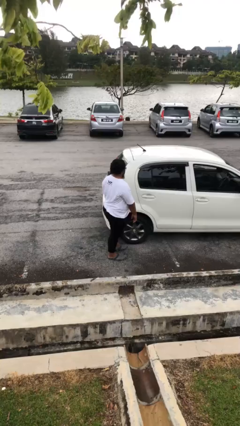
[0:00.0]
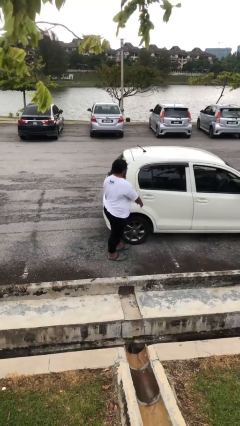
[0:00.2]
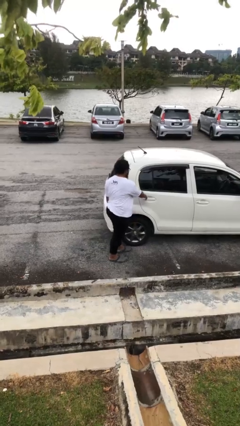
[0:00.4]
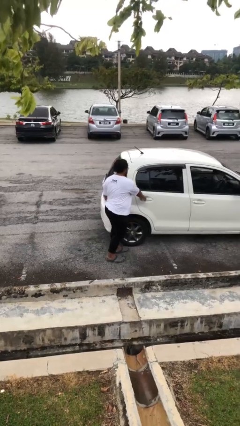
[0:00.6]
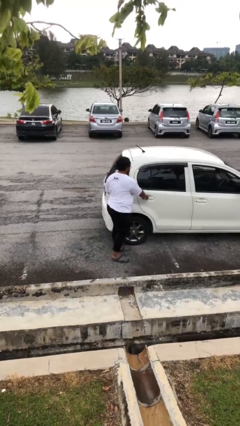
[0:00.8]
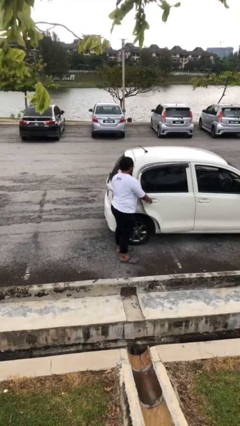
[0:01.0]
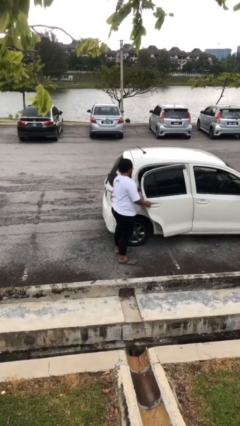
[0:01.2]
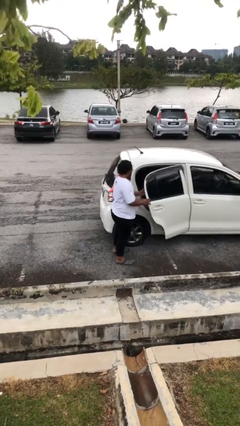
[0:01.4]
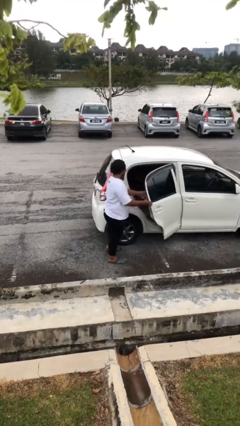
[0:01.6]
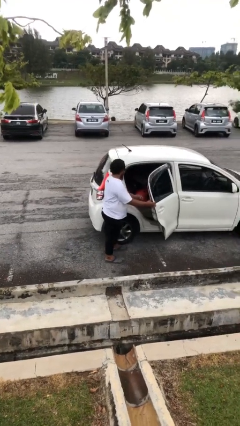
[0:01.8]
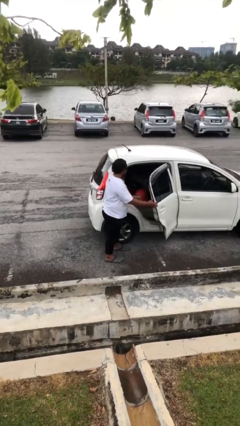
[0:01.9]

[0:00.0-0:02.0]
person opens car door

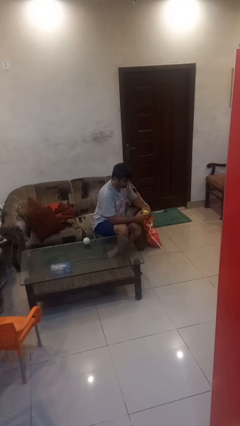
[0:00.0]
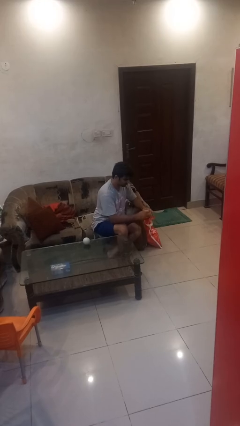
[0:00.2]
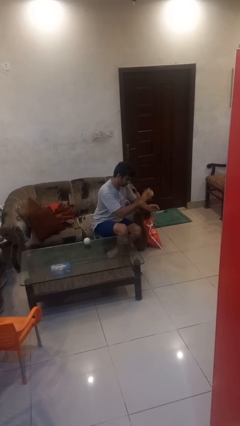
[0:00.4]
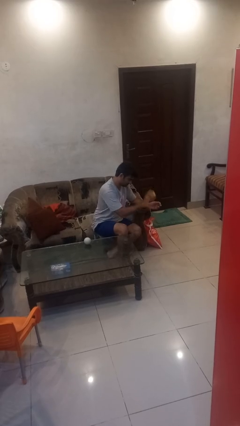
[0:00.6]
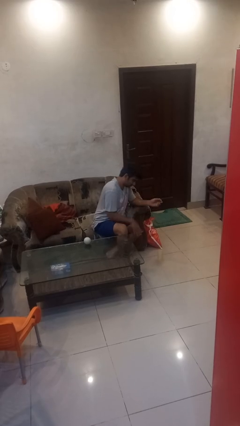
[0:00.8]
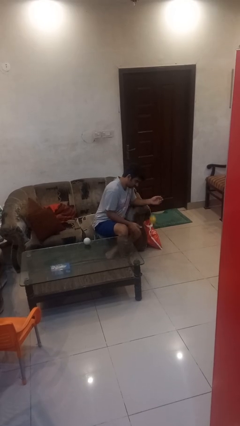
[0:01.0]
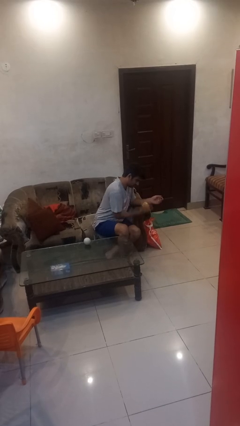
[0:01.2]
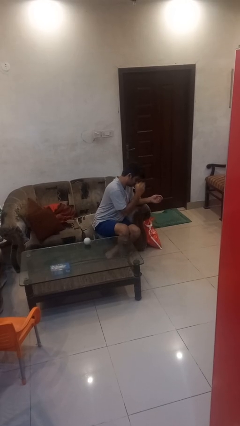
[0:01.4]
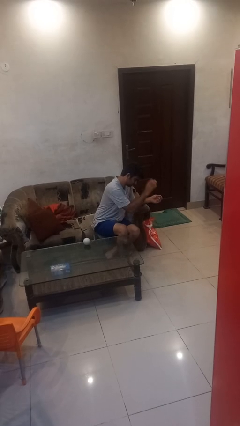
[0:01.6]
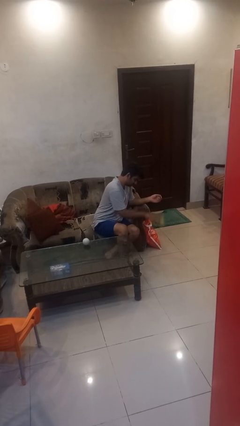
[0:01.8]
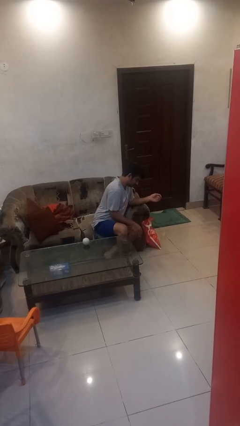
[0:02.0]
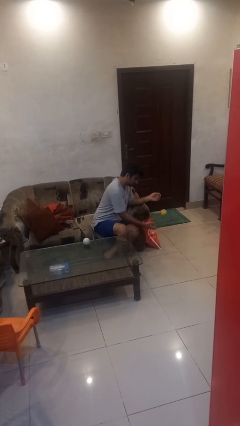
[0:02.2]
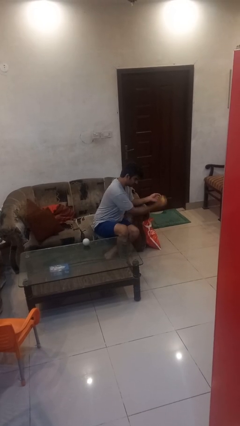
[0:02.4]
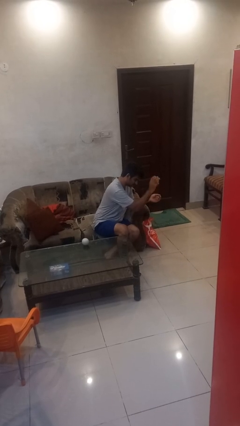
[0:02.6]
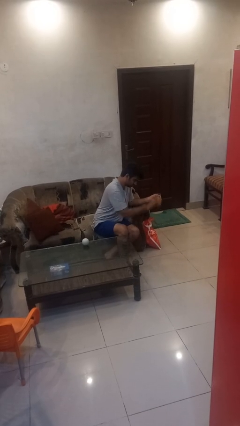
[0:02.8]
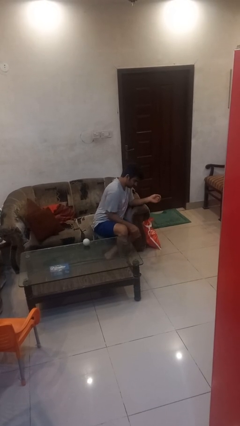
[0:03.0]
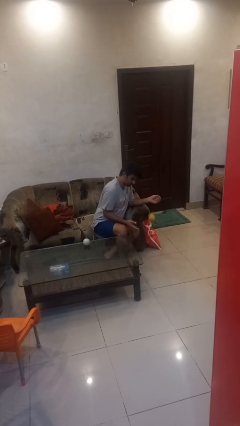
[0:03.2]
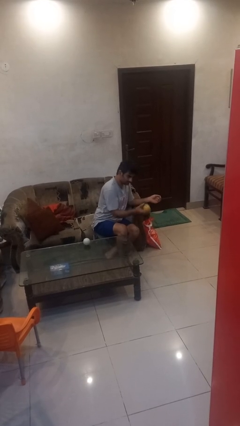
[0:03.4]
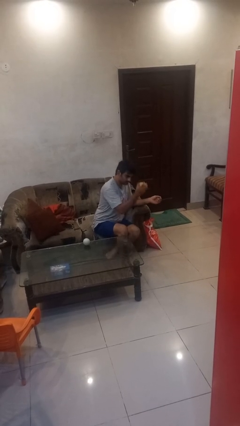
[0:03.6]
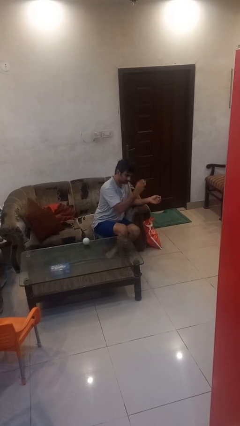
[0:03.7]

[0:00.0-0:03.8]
person bounces ball on floor

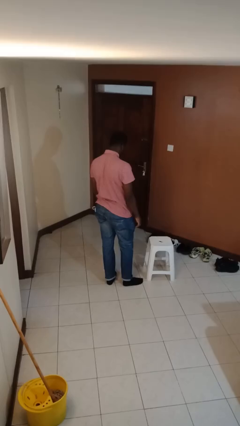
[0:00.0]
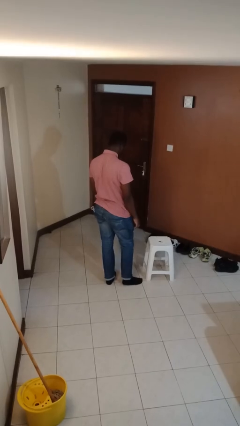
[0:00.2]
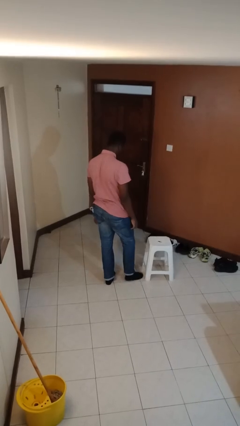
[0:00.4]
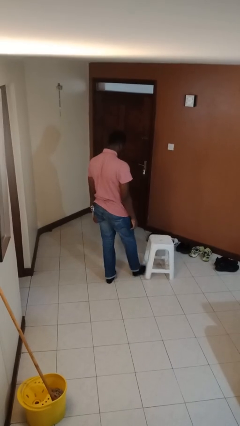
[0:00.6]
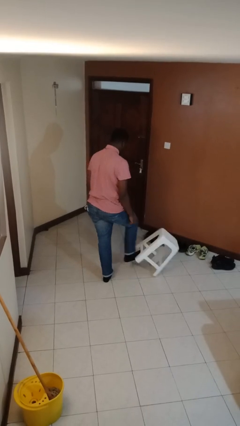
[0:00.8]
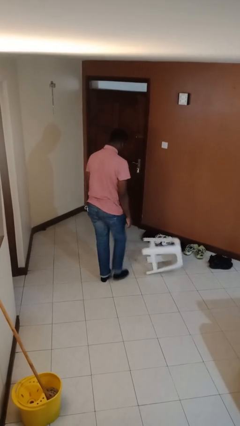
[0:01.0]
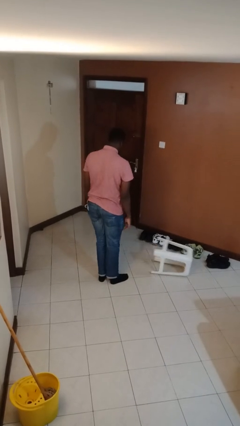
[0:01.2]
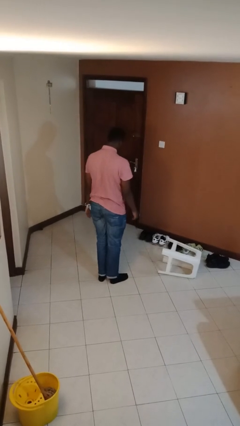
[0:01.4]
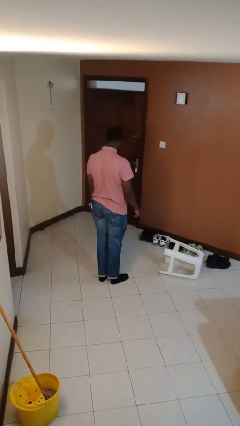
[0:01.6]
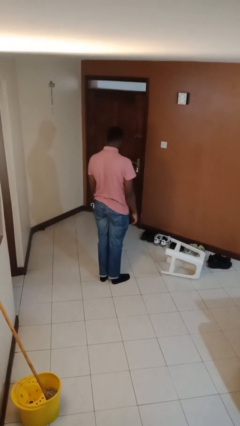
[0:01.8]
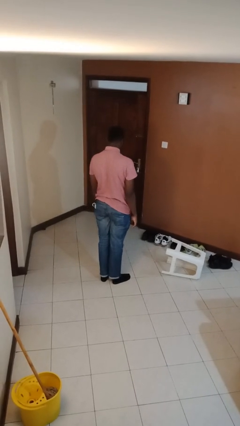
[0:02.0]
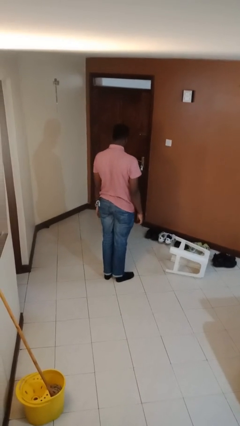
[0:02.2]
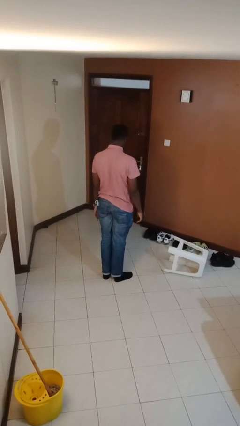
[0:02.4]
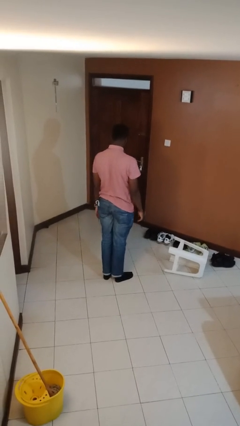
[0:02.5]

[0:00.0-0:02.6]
person knocks over furniture

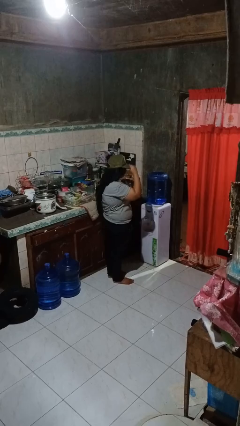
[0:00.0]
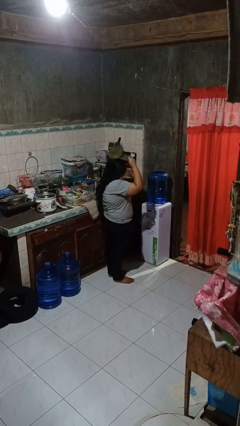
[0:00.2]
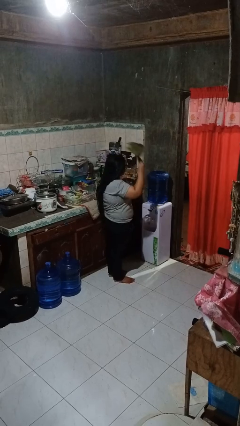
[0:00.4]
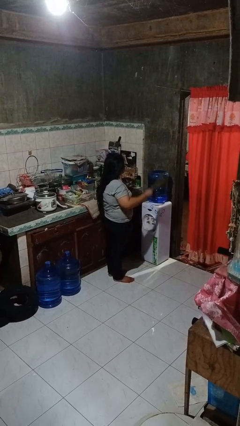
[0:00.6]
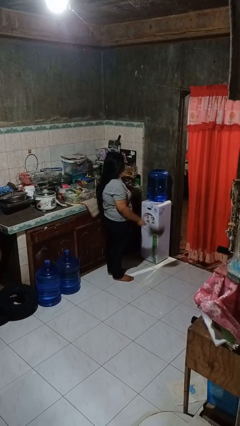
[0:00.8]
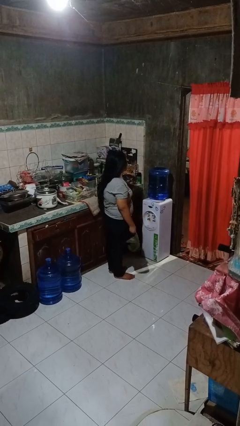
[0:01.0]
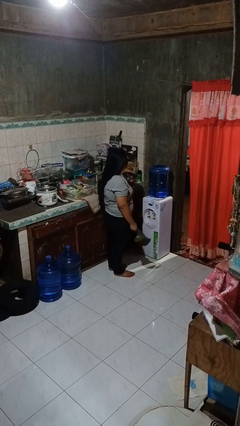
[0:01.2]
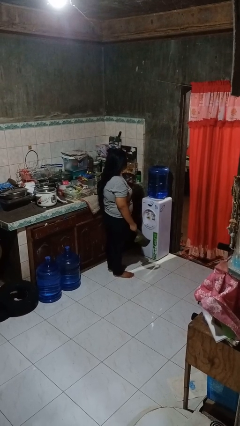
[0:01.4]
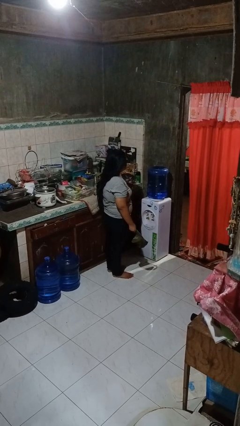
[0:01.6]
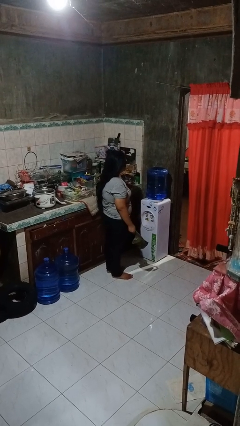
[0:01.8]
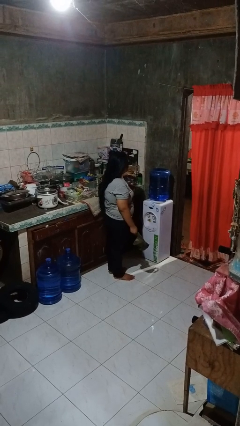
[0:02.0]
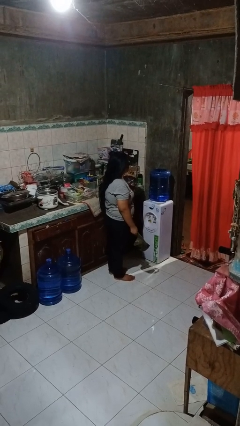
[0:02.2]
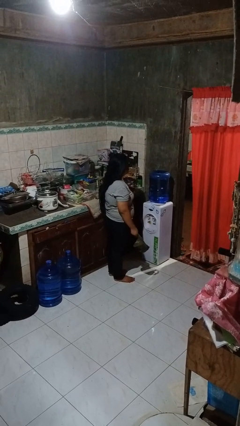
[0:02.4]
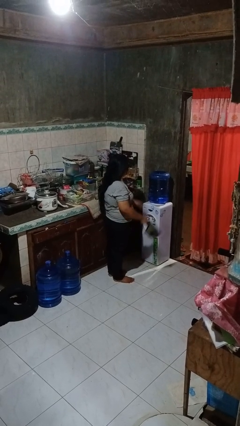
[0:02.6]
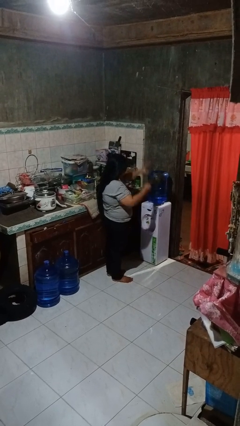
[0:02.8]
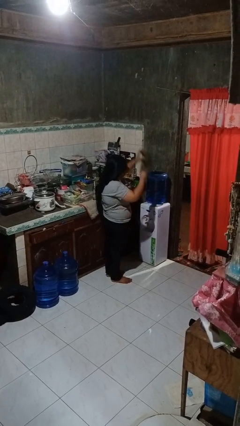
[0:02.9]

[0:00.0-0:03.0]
person takes off hat

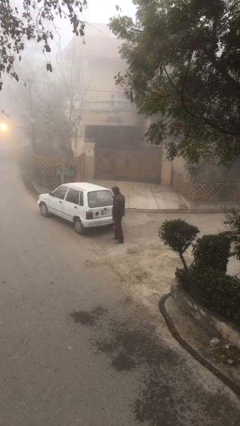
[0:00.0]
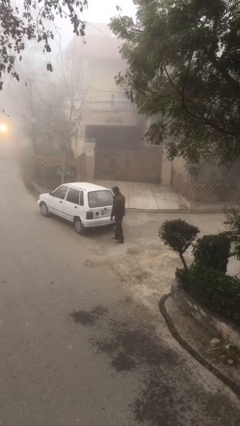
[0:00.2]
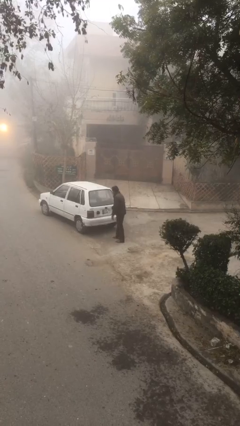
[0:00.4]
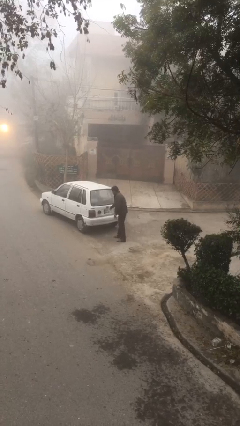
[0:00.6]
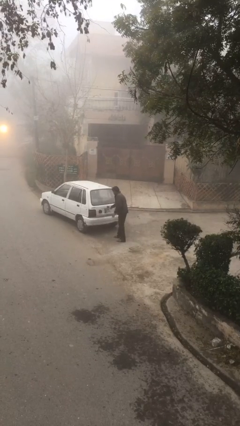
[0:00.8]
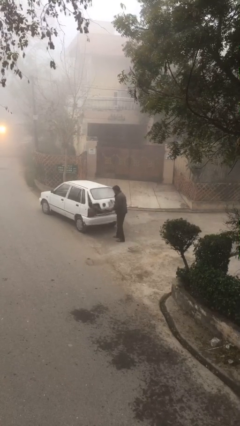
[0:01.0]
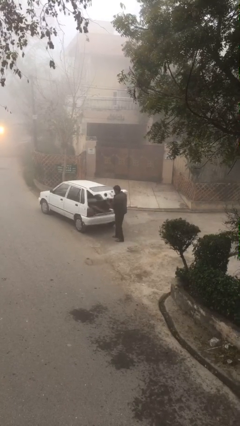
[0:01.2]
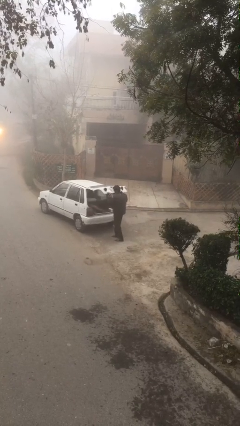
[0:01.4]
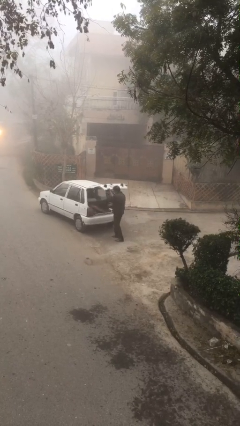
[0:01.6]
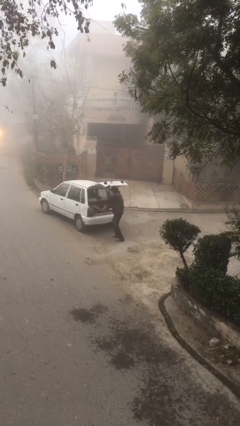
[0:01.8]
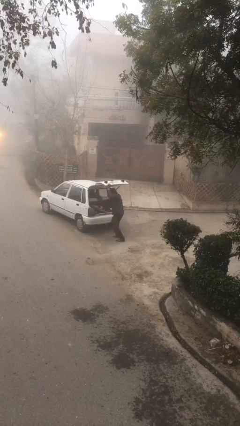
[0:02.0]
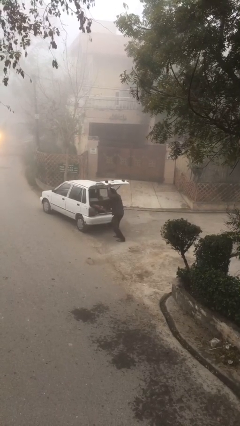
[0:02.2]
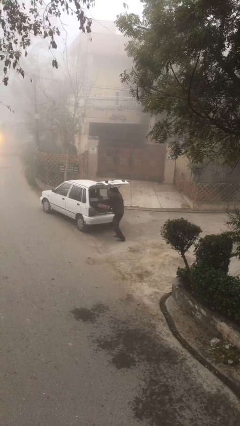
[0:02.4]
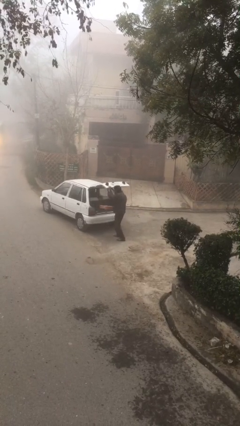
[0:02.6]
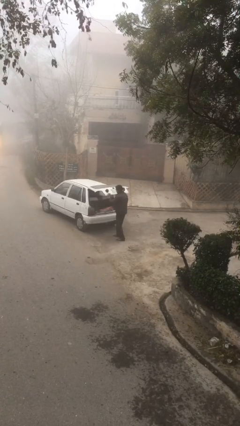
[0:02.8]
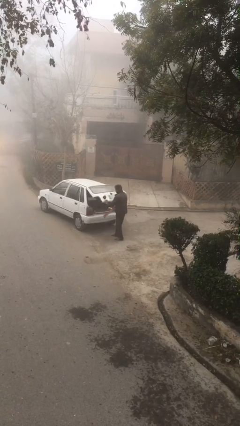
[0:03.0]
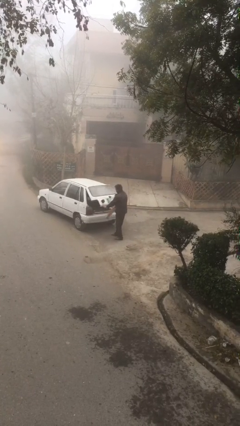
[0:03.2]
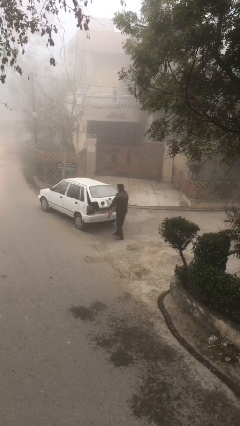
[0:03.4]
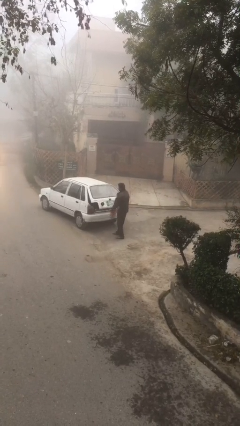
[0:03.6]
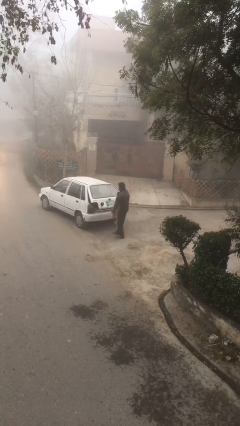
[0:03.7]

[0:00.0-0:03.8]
person unloads car

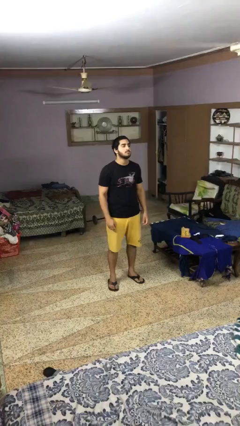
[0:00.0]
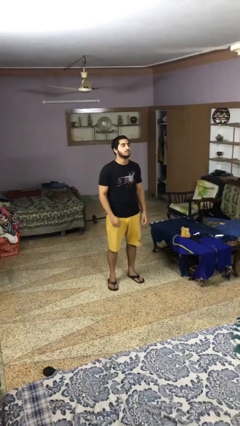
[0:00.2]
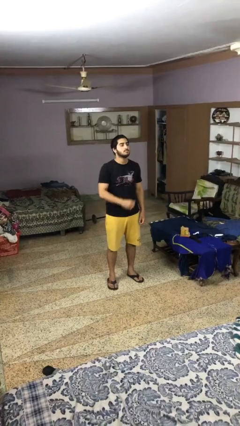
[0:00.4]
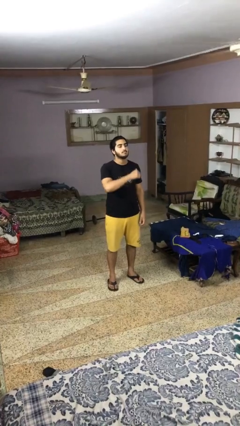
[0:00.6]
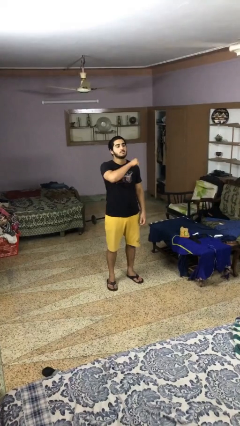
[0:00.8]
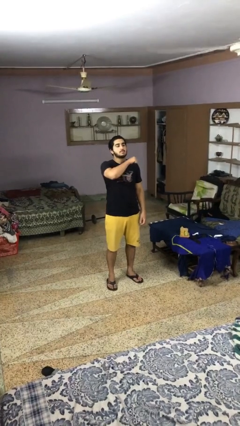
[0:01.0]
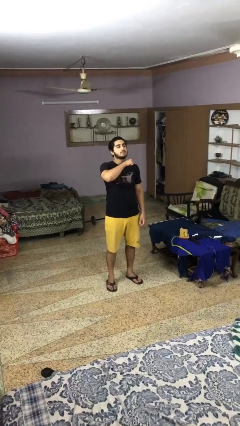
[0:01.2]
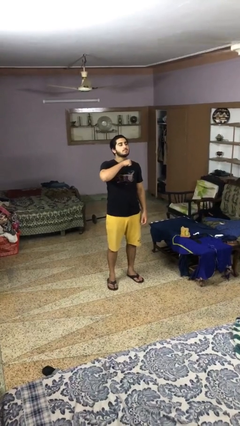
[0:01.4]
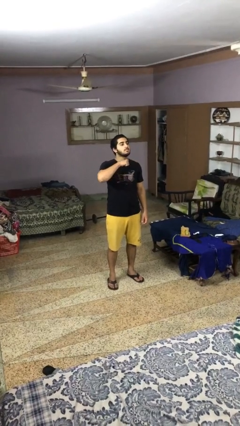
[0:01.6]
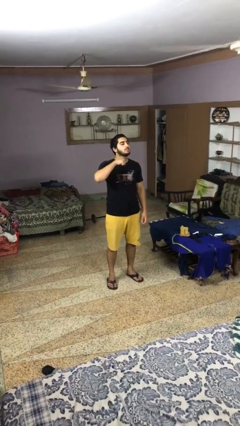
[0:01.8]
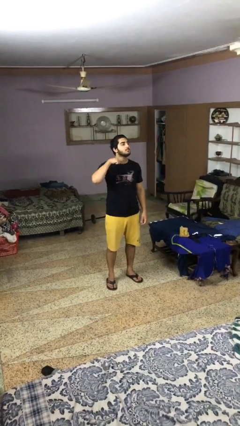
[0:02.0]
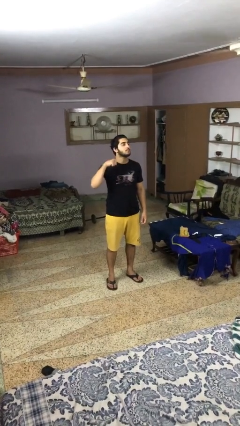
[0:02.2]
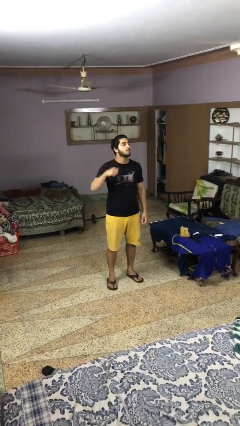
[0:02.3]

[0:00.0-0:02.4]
person gestures cut
